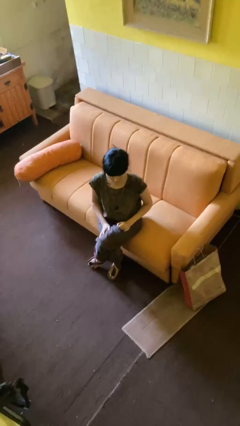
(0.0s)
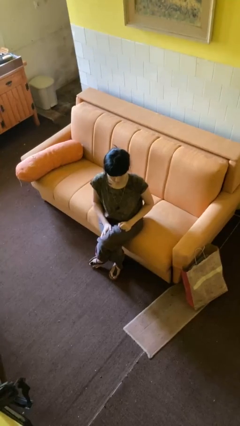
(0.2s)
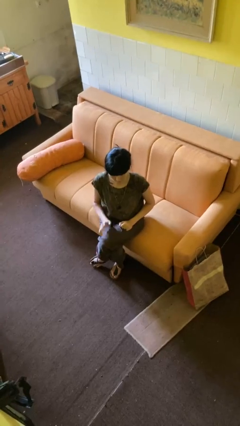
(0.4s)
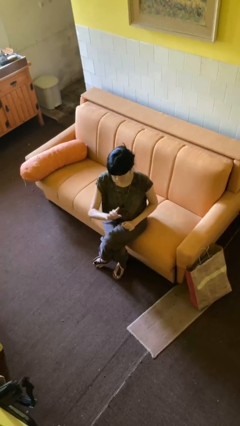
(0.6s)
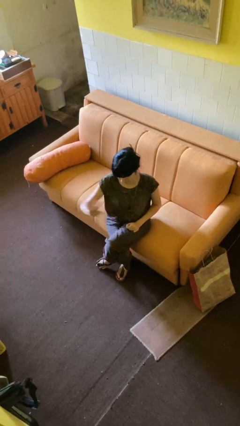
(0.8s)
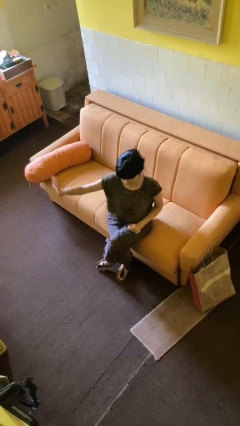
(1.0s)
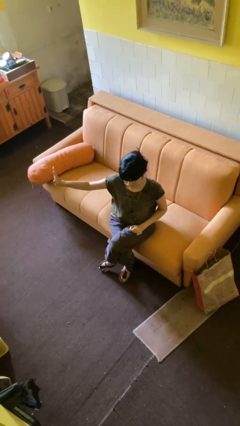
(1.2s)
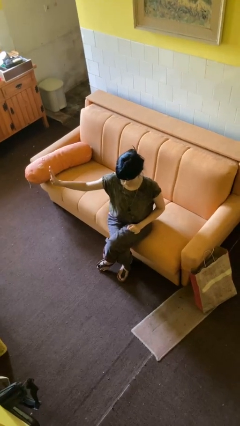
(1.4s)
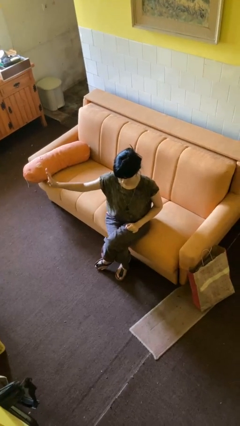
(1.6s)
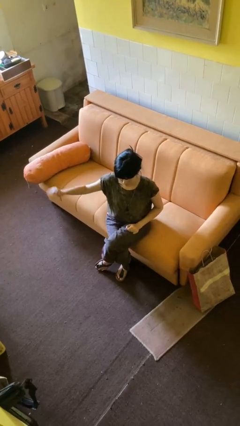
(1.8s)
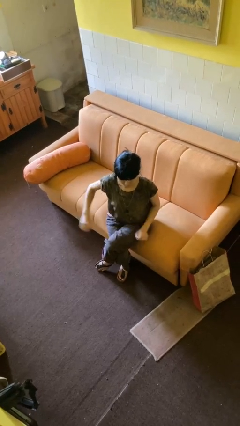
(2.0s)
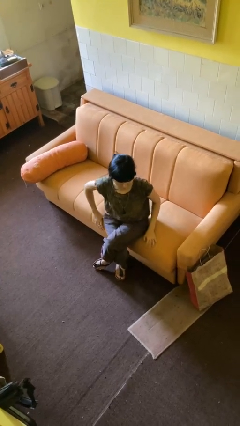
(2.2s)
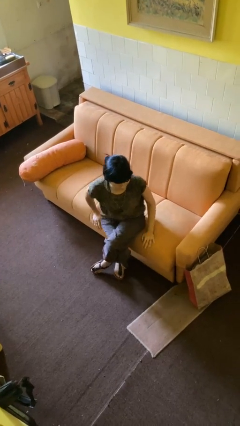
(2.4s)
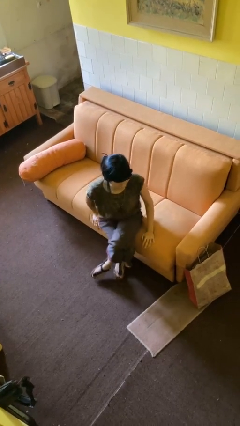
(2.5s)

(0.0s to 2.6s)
person gestures swipe right

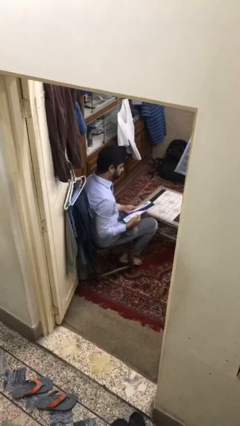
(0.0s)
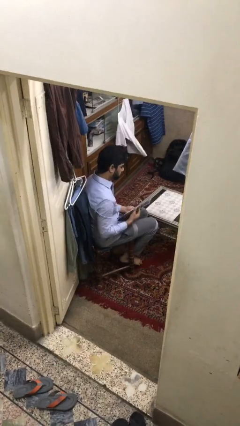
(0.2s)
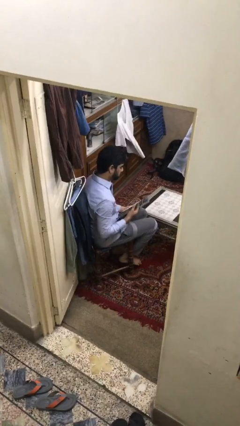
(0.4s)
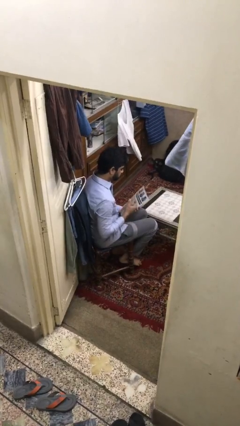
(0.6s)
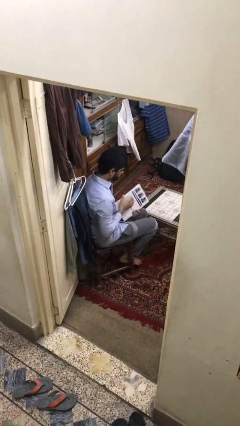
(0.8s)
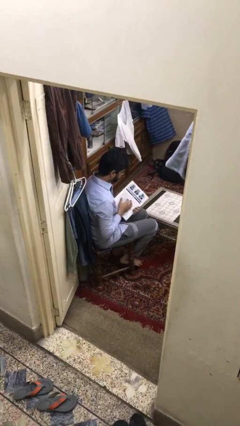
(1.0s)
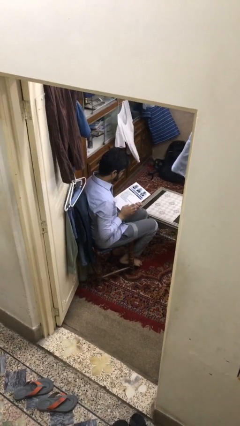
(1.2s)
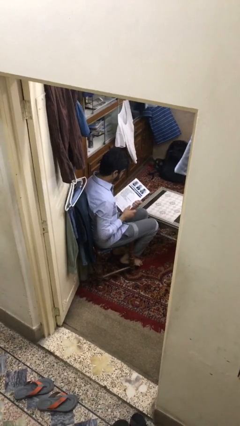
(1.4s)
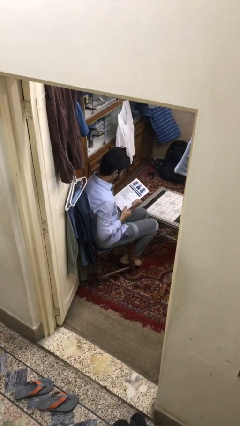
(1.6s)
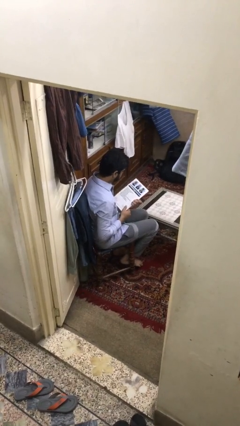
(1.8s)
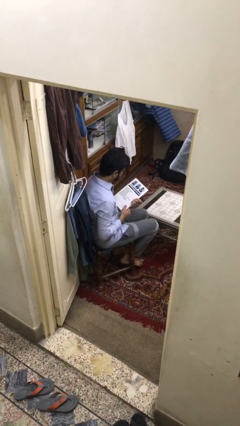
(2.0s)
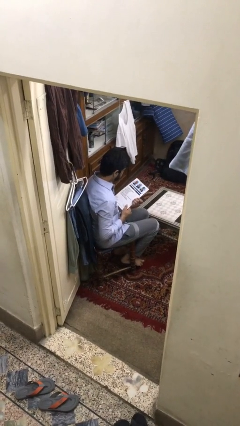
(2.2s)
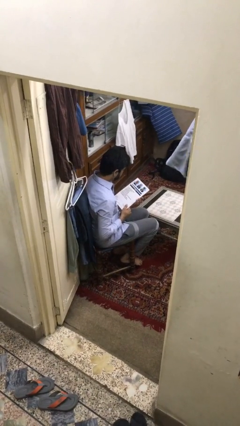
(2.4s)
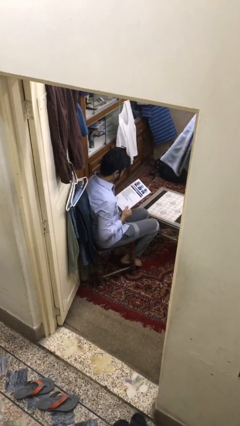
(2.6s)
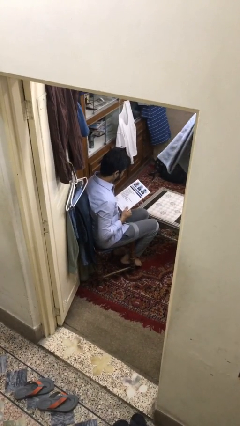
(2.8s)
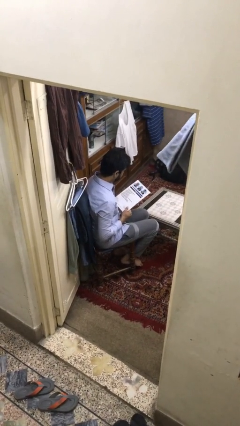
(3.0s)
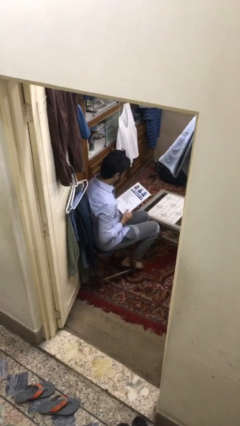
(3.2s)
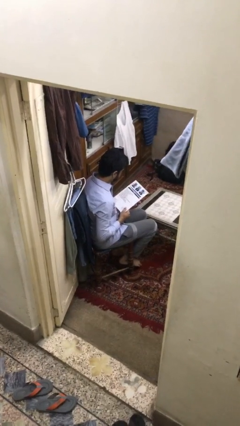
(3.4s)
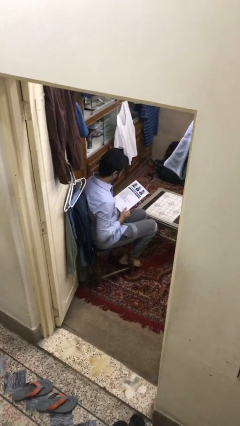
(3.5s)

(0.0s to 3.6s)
person reads document

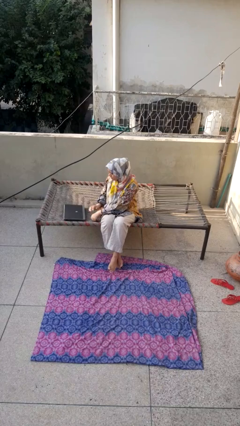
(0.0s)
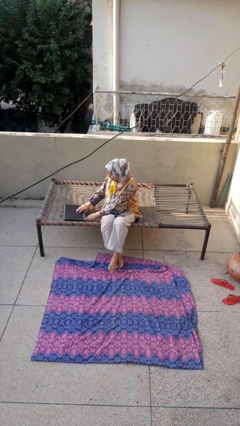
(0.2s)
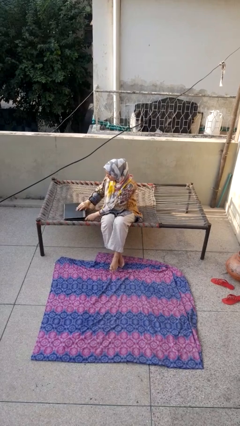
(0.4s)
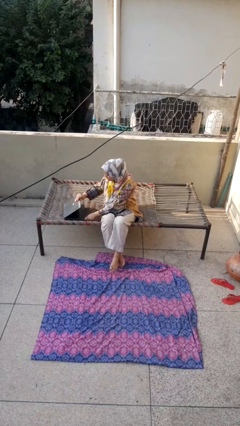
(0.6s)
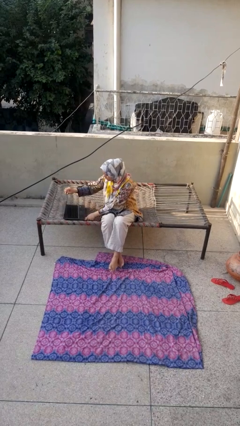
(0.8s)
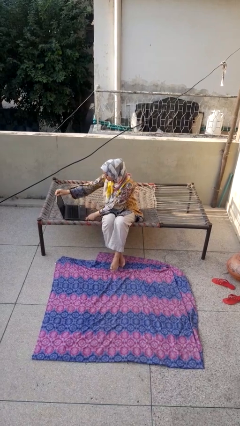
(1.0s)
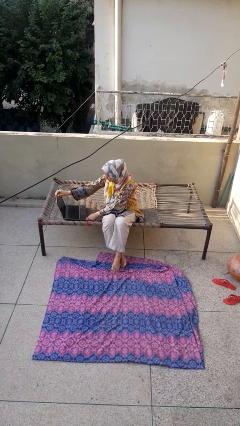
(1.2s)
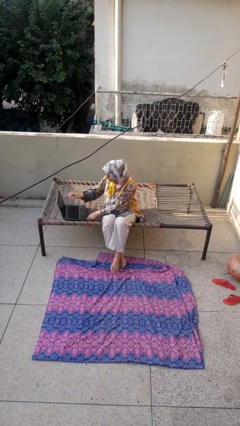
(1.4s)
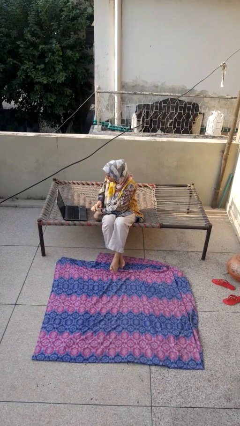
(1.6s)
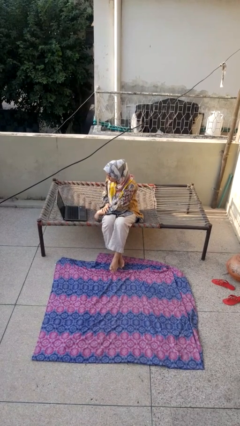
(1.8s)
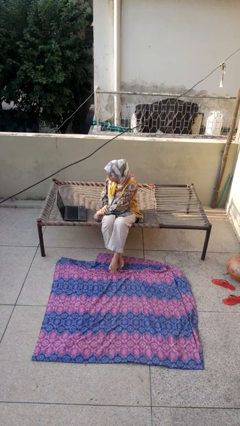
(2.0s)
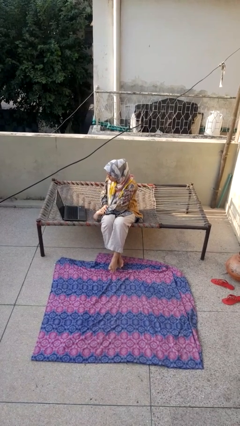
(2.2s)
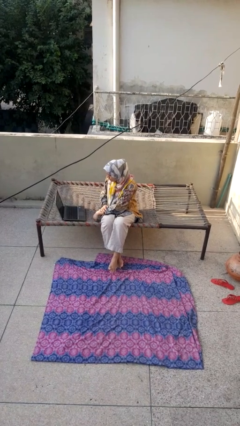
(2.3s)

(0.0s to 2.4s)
person opens laptop

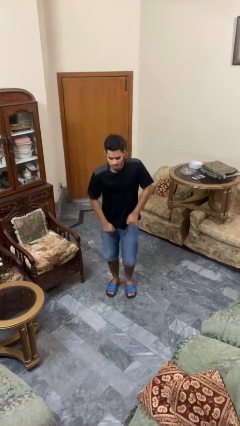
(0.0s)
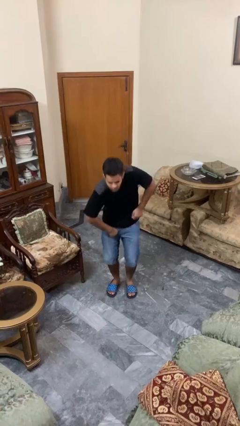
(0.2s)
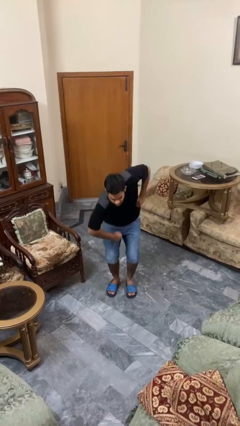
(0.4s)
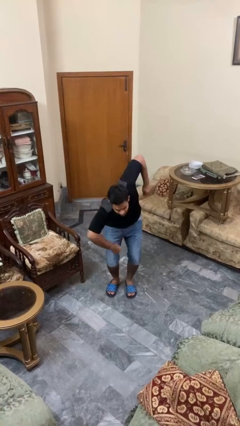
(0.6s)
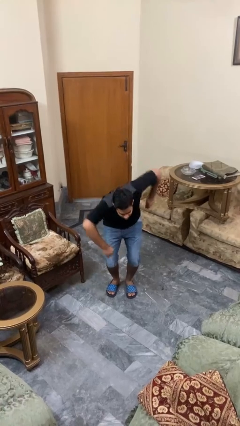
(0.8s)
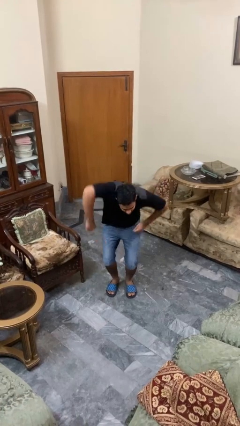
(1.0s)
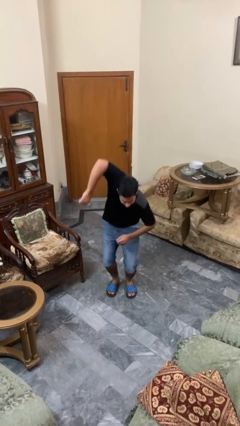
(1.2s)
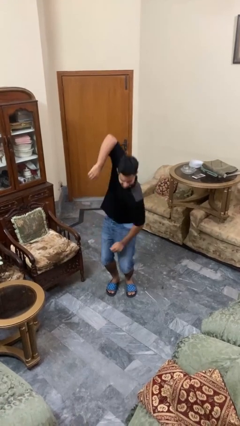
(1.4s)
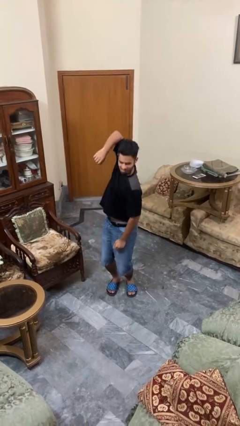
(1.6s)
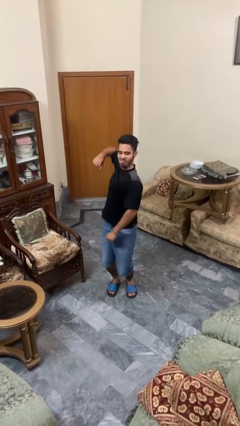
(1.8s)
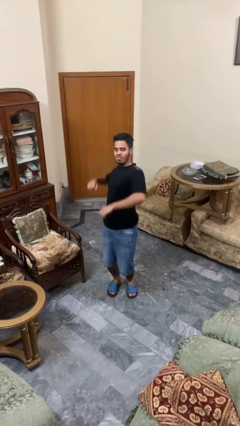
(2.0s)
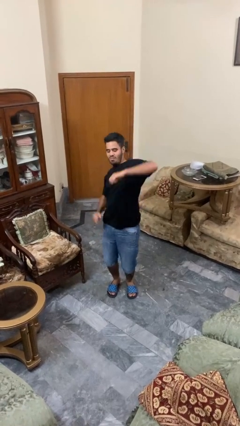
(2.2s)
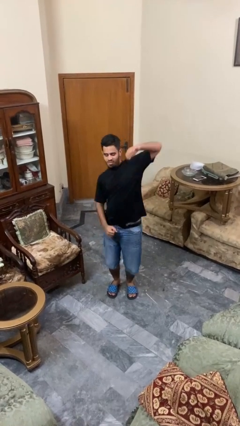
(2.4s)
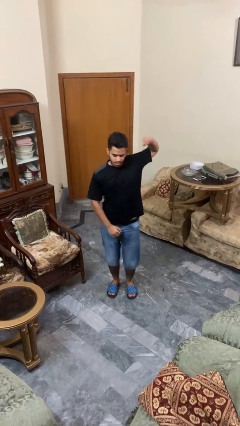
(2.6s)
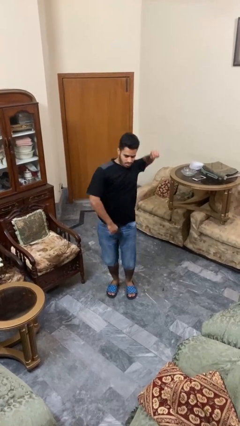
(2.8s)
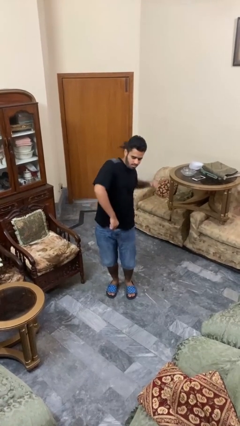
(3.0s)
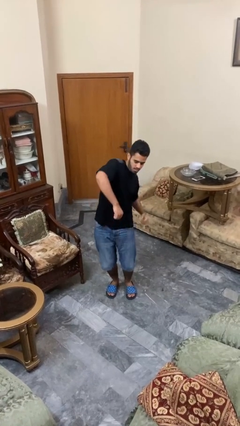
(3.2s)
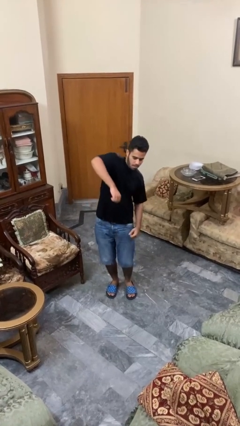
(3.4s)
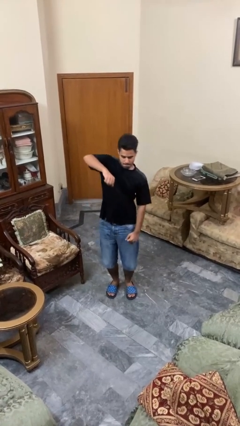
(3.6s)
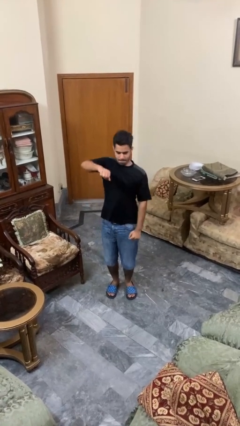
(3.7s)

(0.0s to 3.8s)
person dances in place

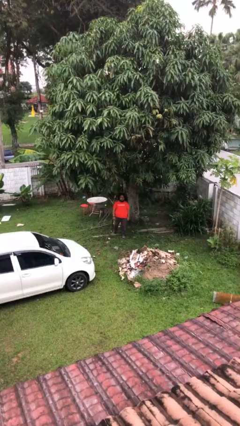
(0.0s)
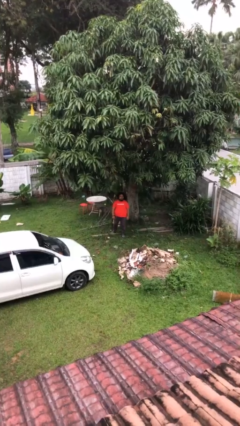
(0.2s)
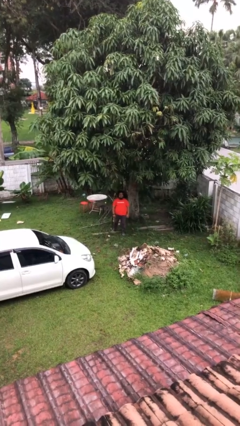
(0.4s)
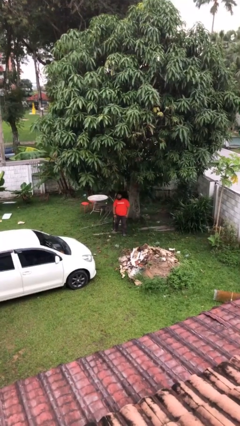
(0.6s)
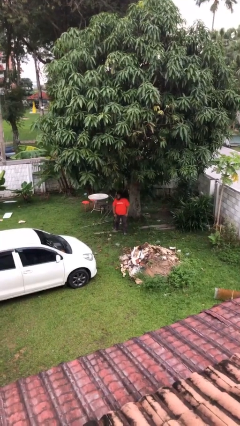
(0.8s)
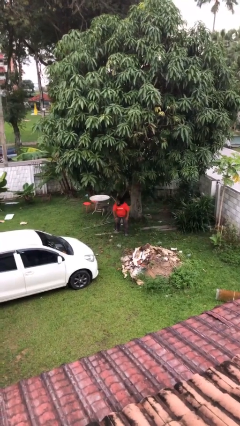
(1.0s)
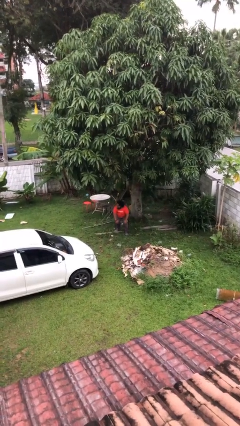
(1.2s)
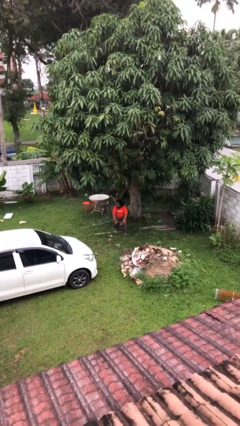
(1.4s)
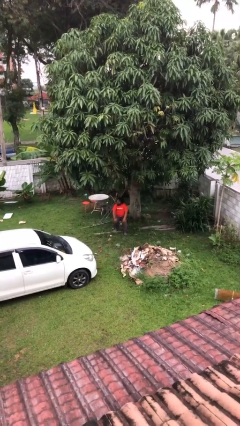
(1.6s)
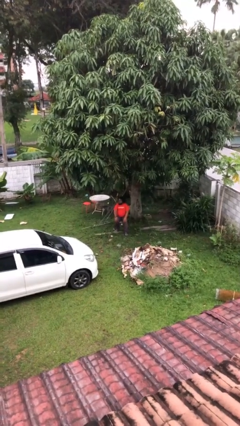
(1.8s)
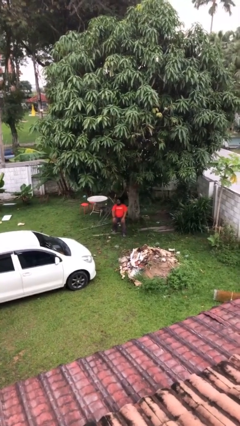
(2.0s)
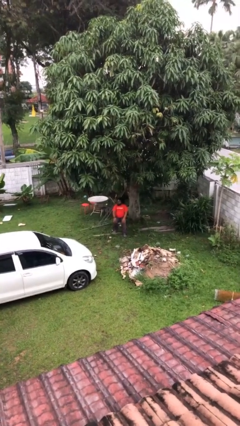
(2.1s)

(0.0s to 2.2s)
person sits down

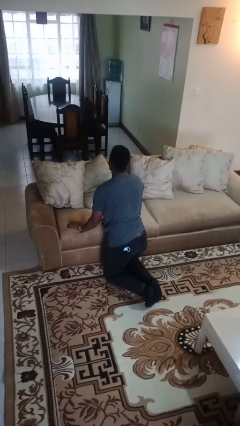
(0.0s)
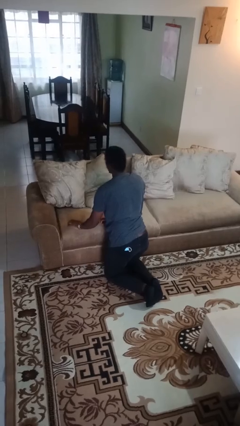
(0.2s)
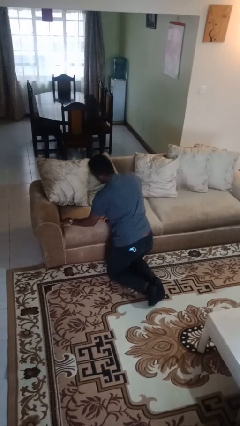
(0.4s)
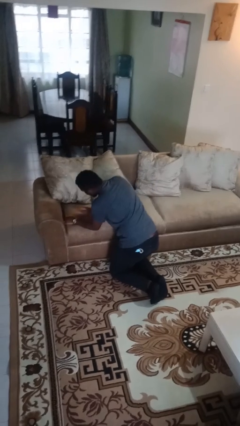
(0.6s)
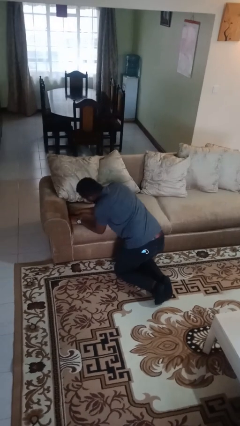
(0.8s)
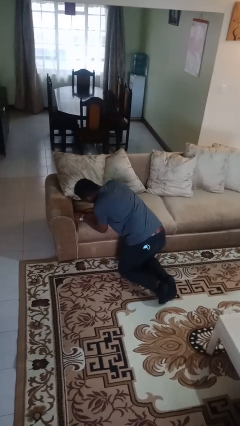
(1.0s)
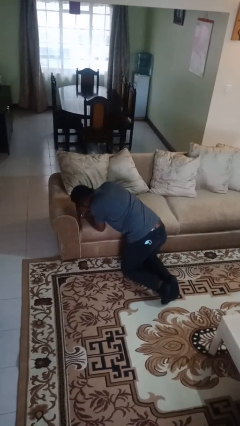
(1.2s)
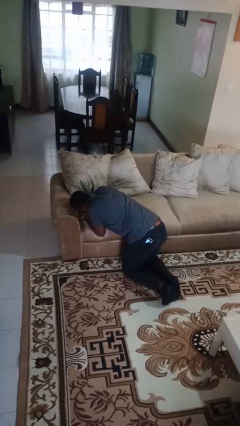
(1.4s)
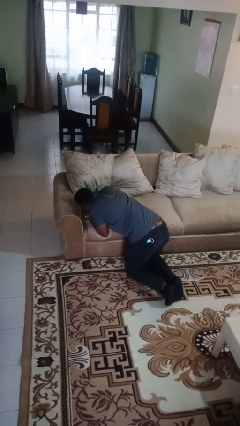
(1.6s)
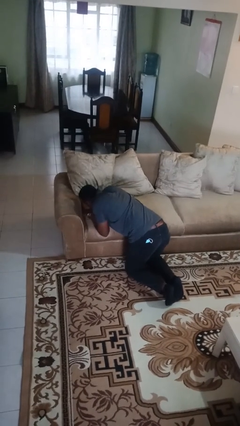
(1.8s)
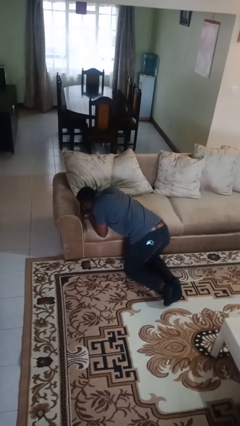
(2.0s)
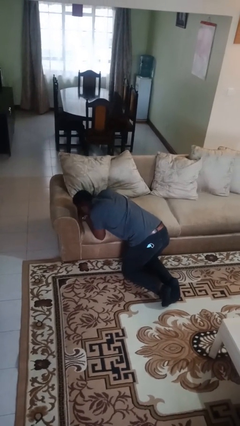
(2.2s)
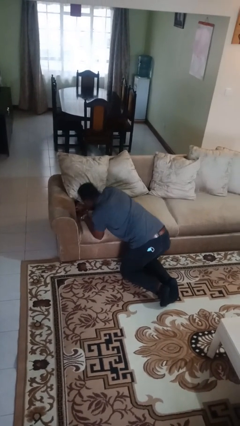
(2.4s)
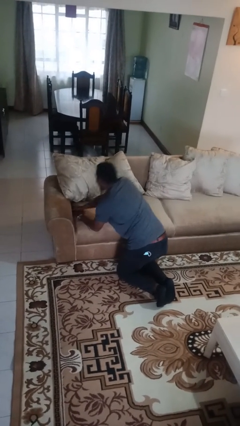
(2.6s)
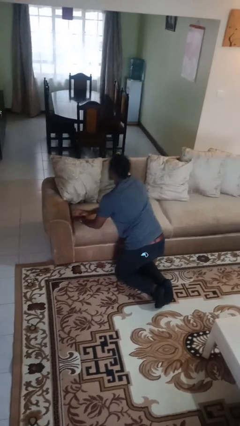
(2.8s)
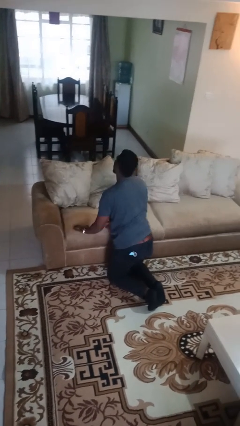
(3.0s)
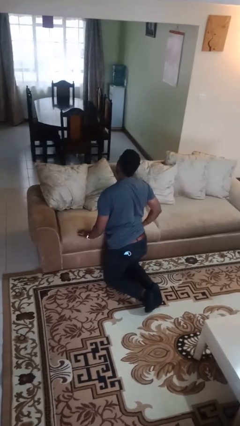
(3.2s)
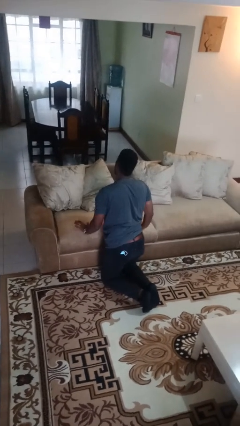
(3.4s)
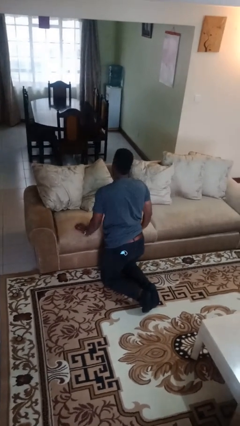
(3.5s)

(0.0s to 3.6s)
person searches in couch
